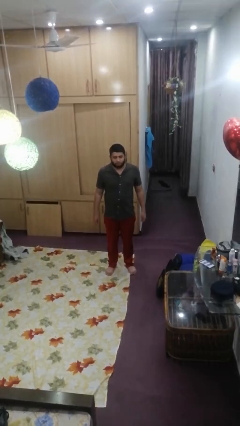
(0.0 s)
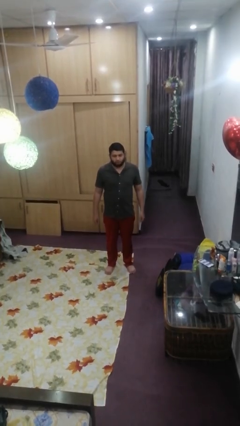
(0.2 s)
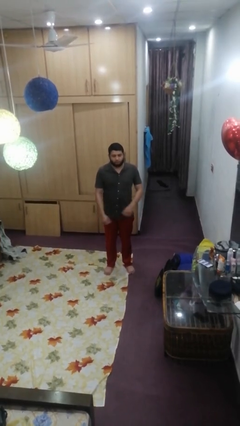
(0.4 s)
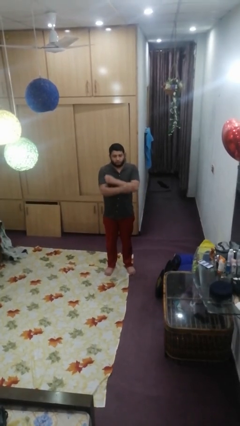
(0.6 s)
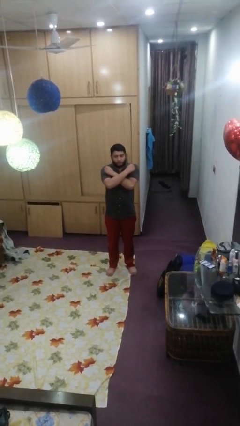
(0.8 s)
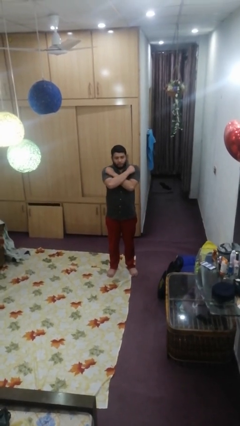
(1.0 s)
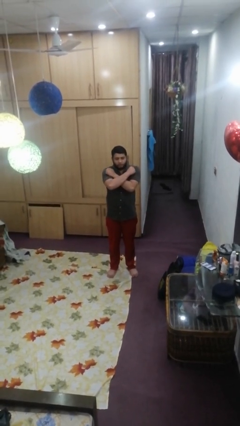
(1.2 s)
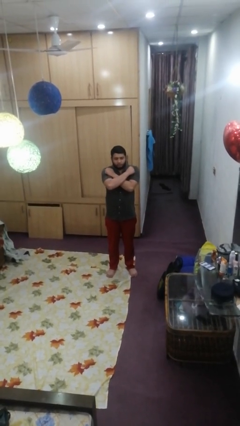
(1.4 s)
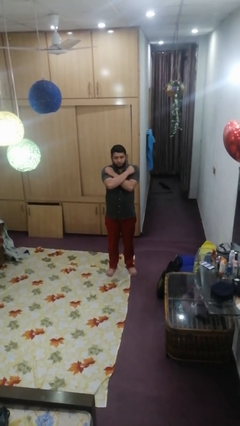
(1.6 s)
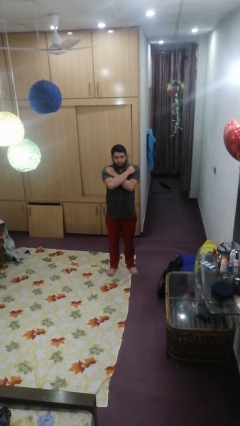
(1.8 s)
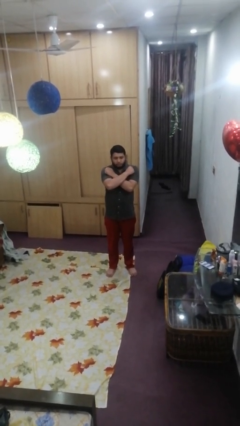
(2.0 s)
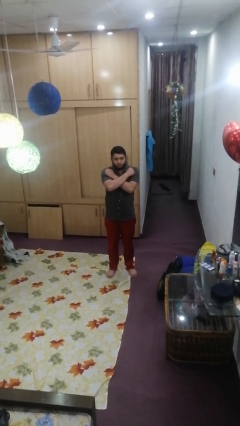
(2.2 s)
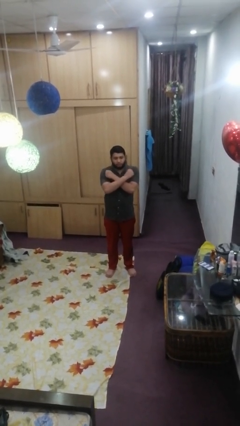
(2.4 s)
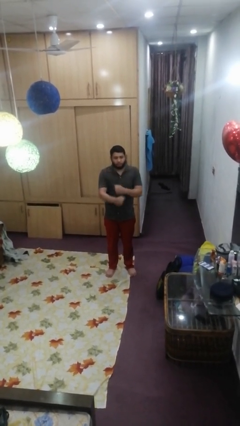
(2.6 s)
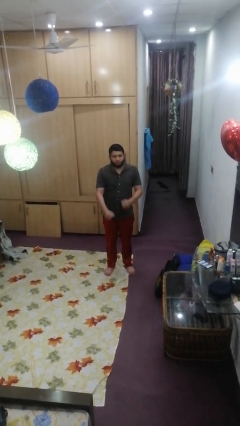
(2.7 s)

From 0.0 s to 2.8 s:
person crosses arms

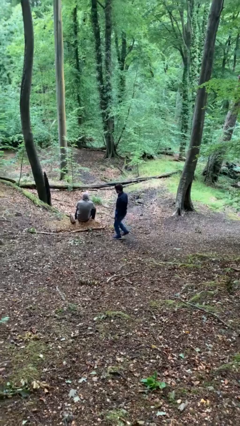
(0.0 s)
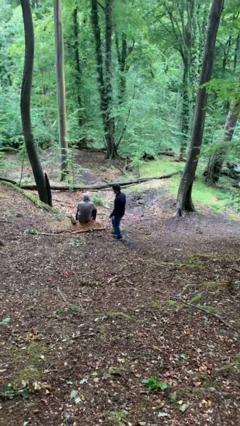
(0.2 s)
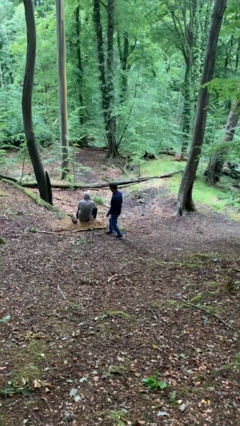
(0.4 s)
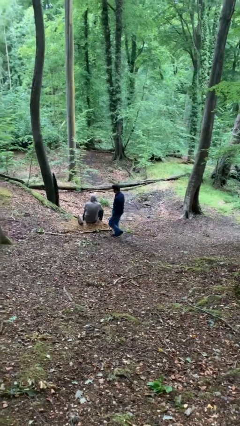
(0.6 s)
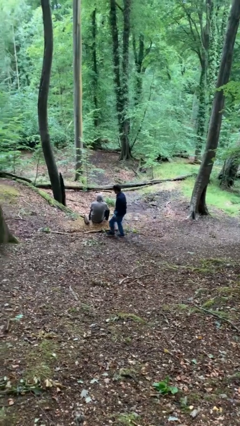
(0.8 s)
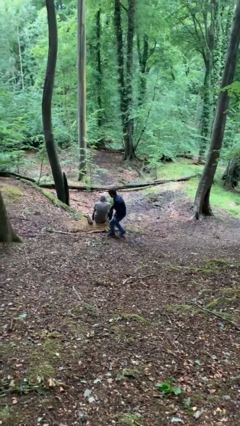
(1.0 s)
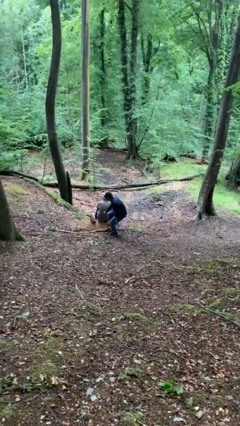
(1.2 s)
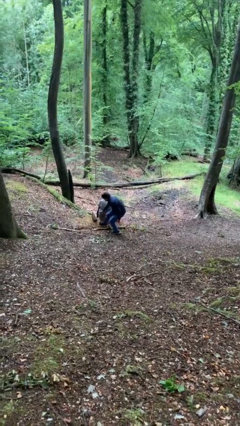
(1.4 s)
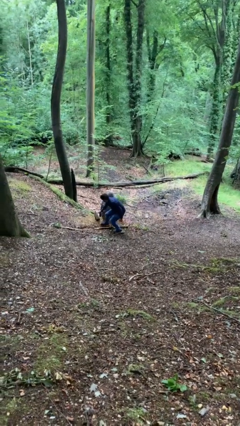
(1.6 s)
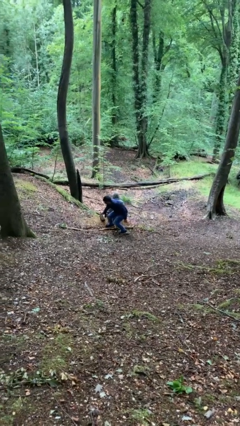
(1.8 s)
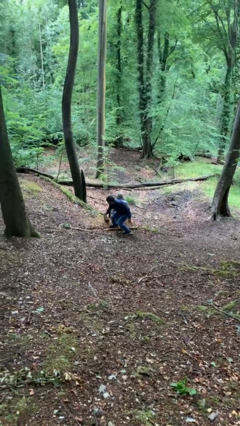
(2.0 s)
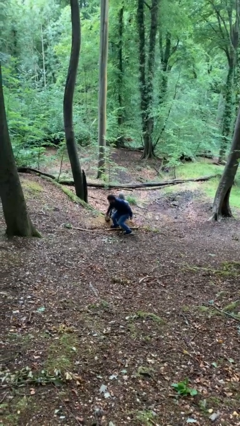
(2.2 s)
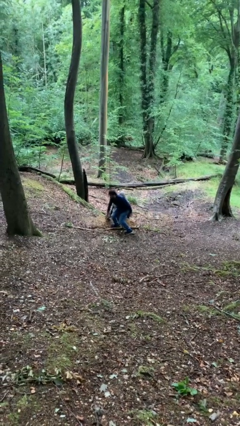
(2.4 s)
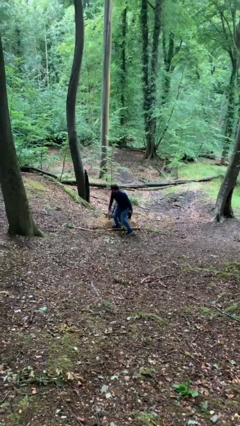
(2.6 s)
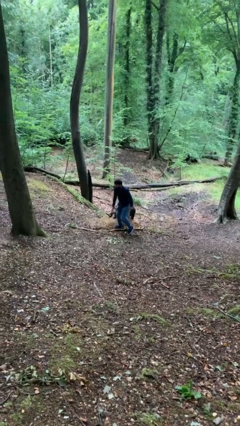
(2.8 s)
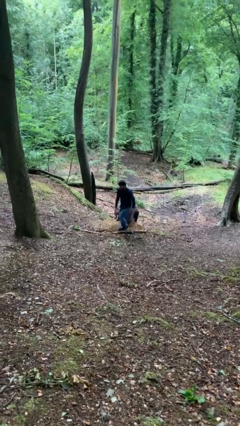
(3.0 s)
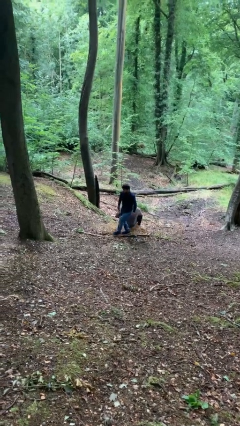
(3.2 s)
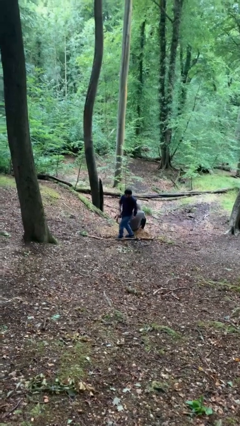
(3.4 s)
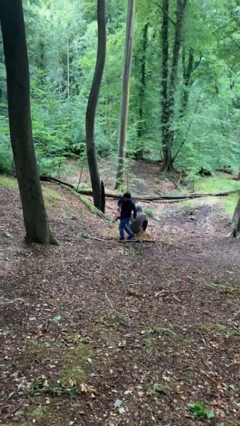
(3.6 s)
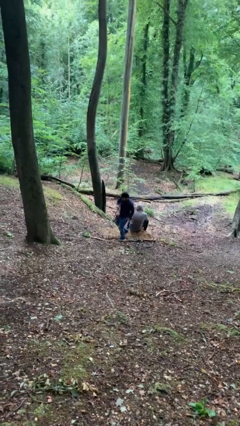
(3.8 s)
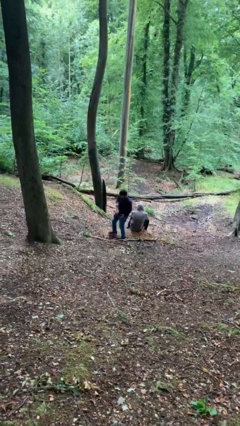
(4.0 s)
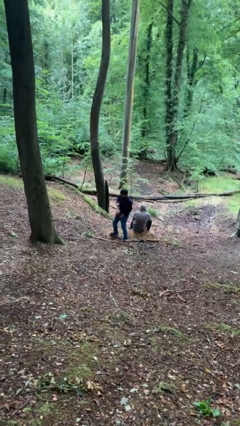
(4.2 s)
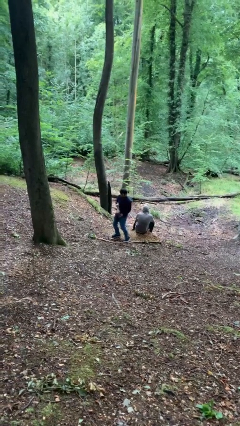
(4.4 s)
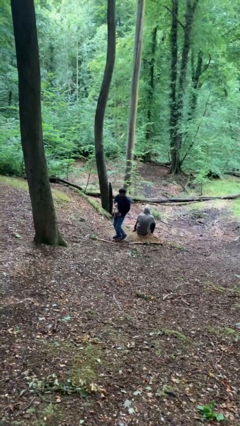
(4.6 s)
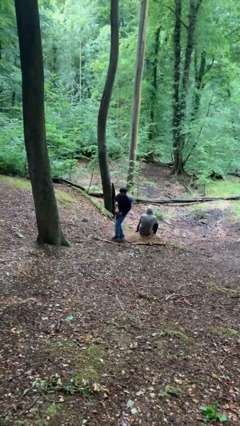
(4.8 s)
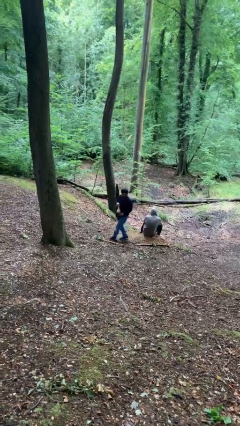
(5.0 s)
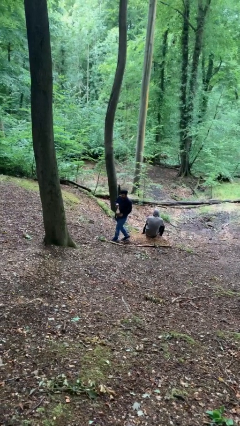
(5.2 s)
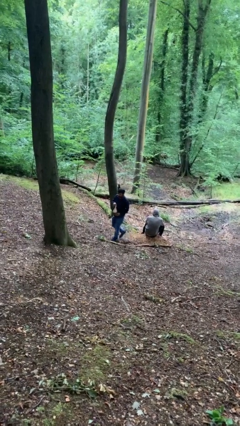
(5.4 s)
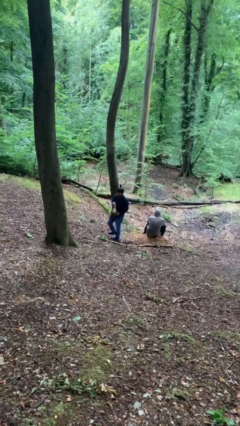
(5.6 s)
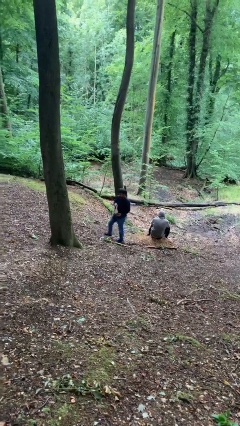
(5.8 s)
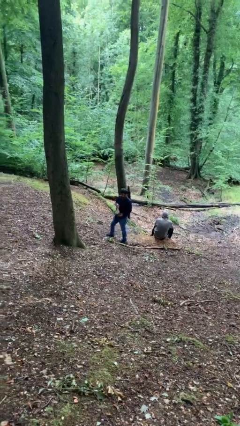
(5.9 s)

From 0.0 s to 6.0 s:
person steals object from person

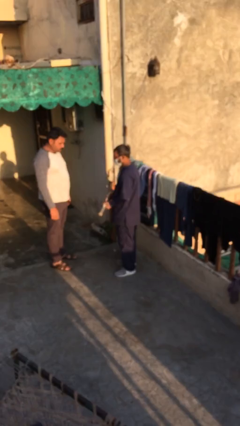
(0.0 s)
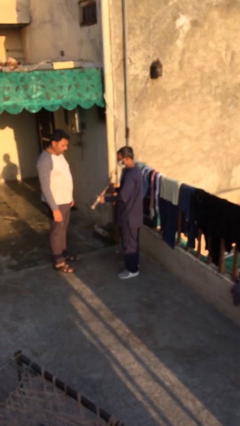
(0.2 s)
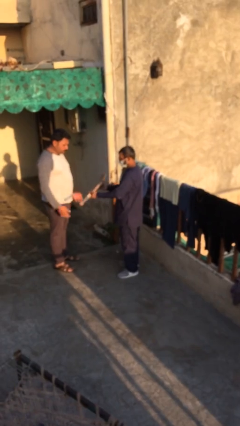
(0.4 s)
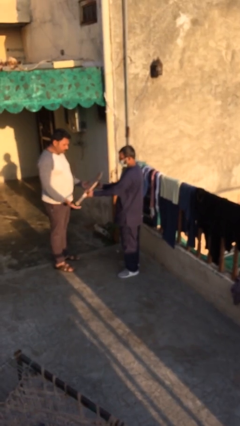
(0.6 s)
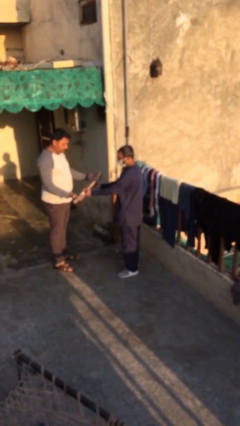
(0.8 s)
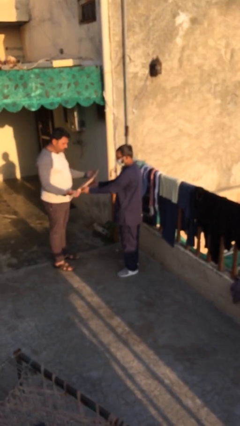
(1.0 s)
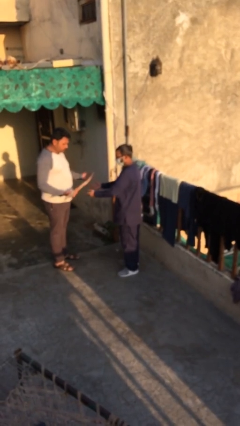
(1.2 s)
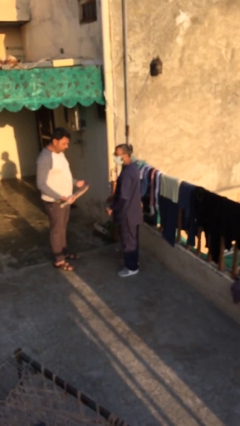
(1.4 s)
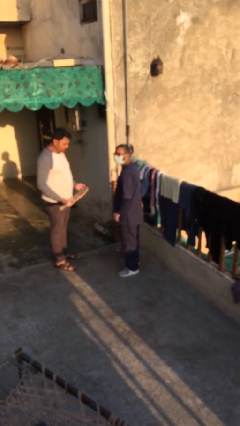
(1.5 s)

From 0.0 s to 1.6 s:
person transfers object to person

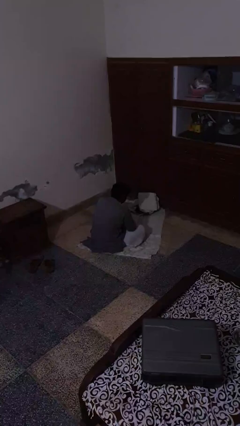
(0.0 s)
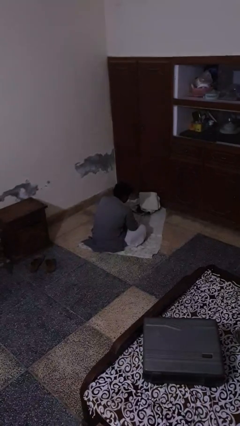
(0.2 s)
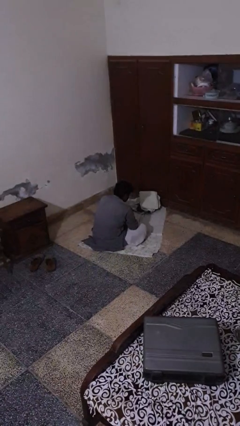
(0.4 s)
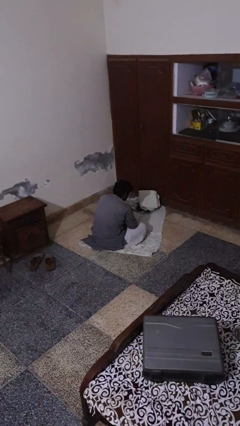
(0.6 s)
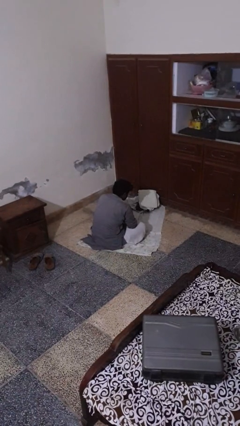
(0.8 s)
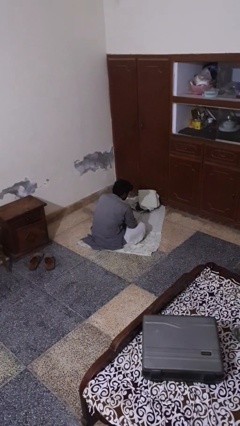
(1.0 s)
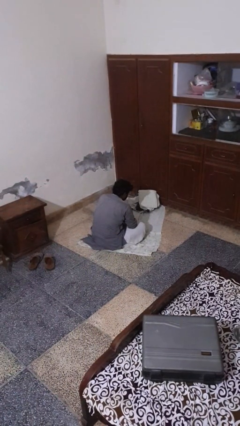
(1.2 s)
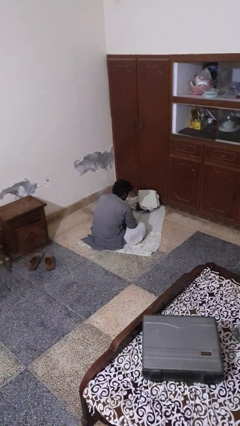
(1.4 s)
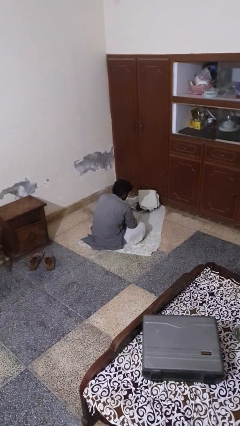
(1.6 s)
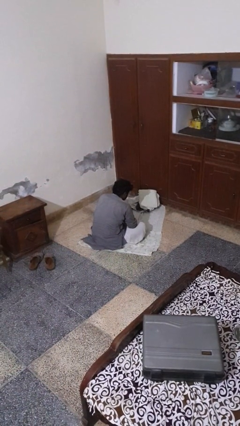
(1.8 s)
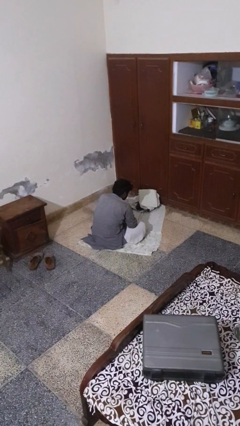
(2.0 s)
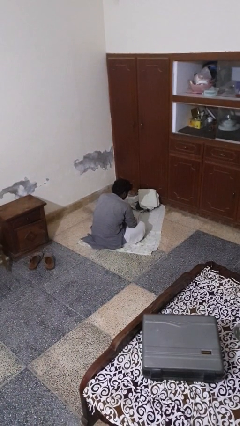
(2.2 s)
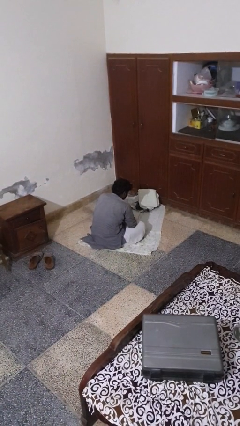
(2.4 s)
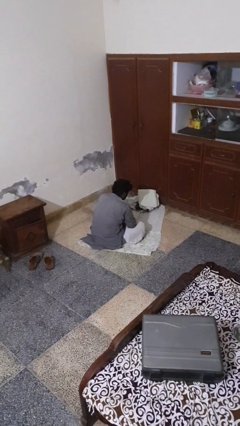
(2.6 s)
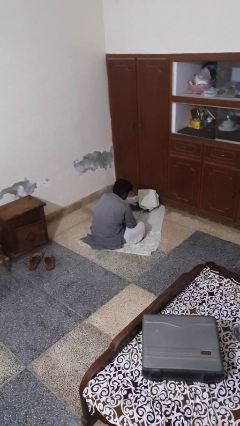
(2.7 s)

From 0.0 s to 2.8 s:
person folds towel

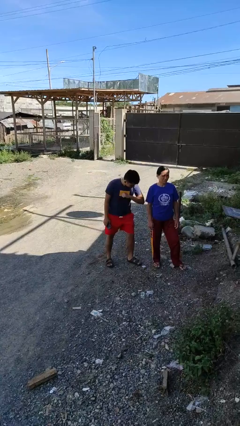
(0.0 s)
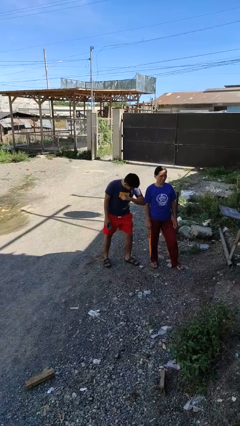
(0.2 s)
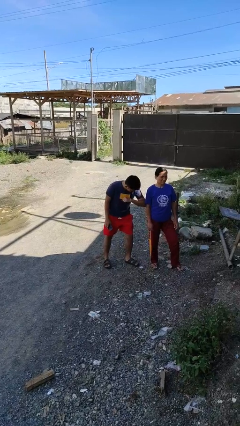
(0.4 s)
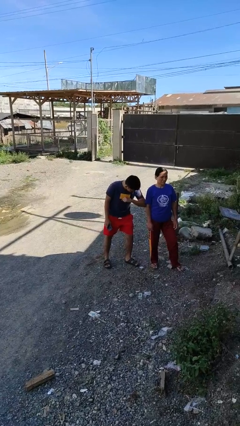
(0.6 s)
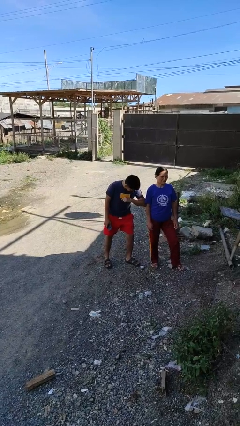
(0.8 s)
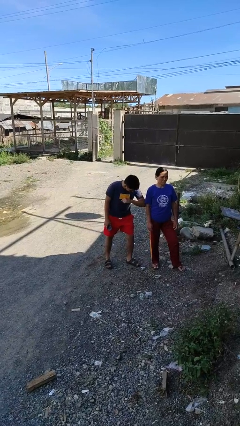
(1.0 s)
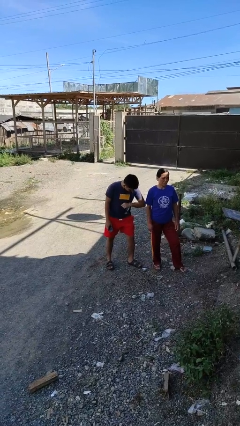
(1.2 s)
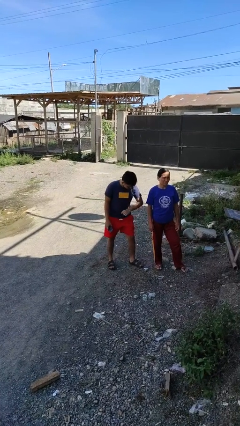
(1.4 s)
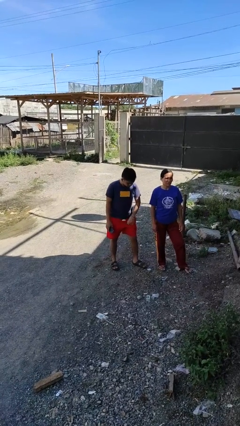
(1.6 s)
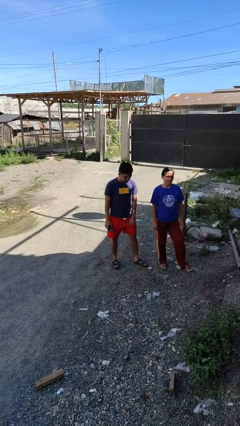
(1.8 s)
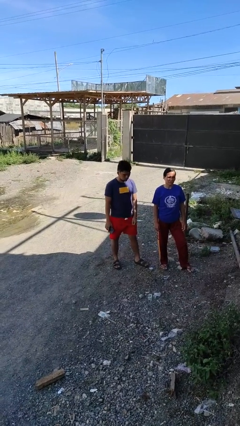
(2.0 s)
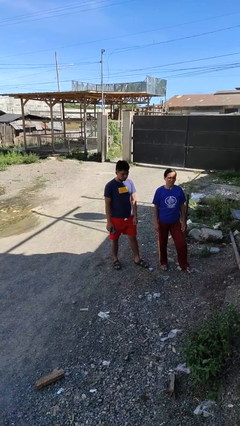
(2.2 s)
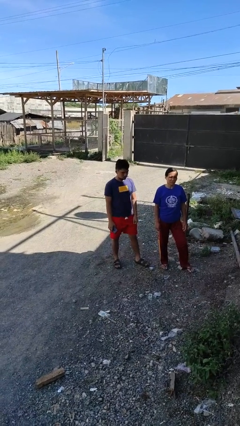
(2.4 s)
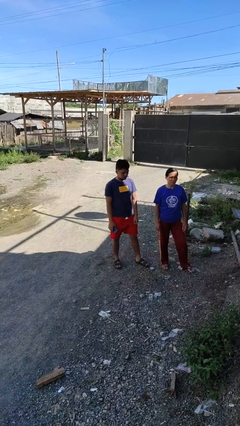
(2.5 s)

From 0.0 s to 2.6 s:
person nudges person with elbow

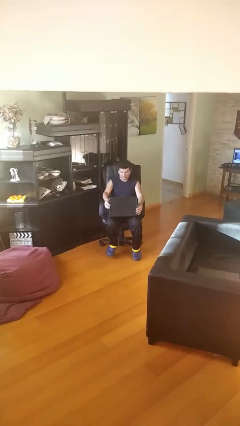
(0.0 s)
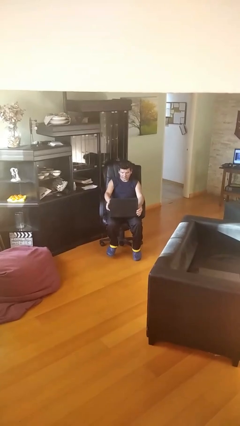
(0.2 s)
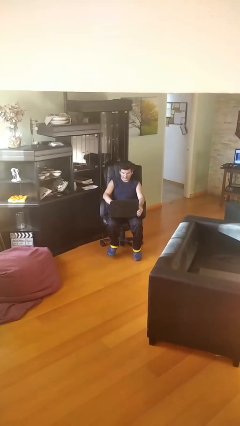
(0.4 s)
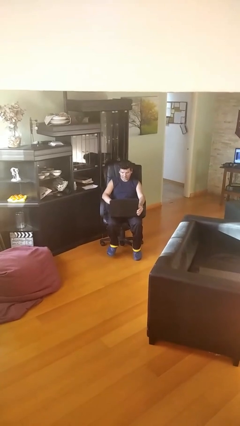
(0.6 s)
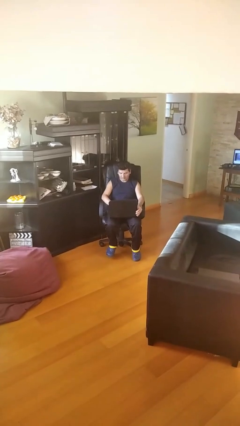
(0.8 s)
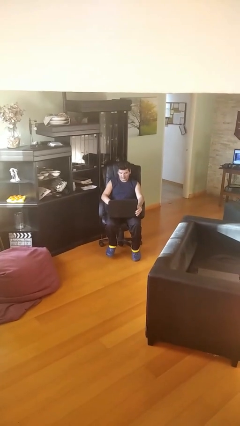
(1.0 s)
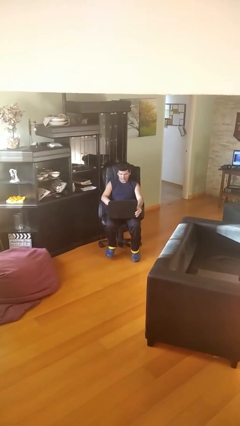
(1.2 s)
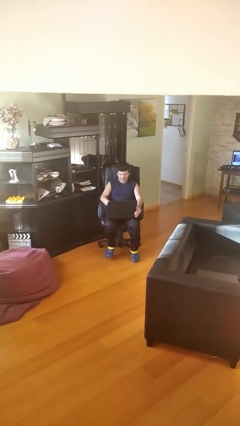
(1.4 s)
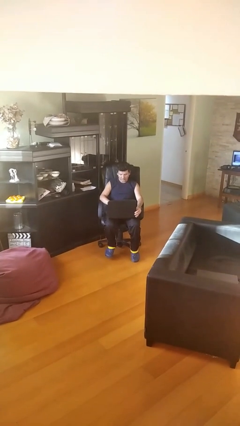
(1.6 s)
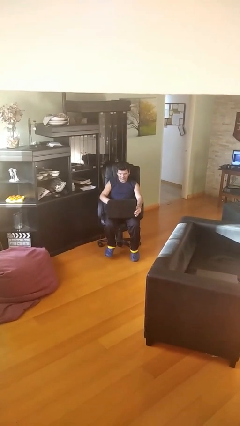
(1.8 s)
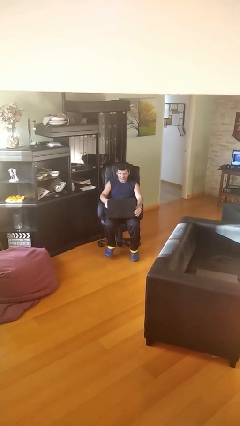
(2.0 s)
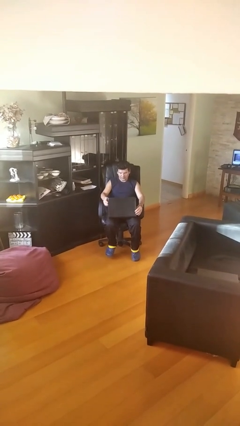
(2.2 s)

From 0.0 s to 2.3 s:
person interacts with laptop
